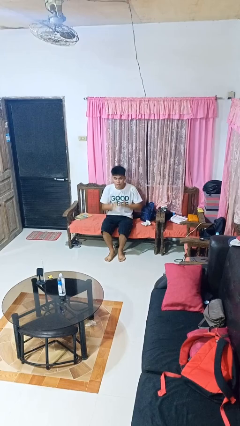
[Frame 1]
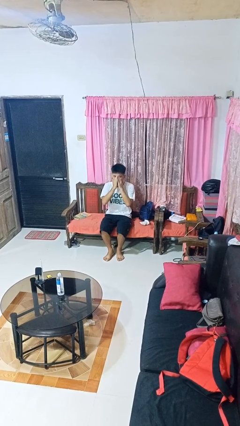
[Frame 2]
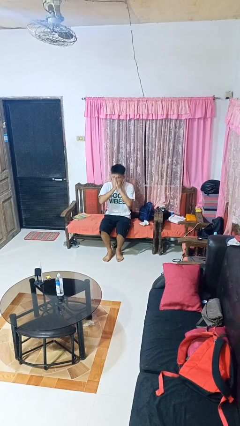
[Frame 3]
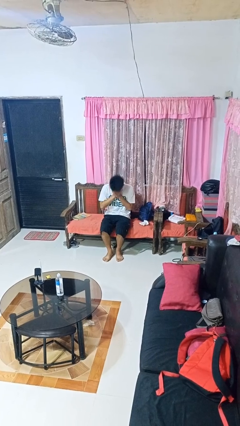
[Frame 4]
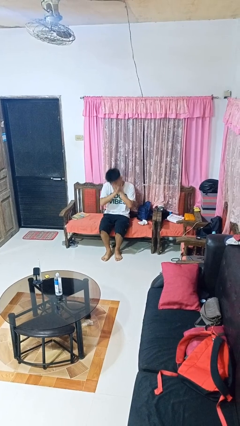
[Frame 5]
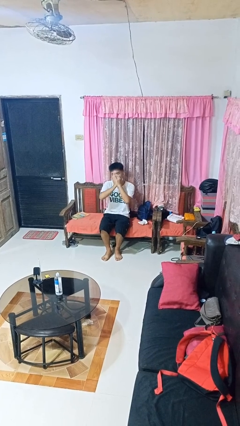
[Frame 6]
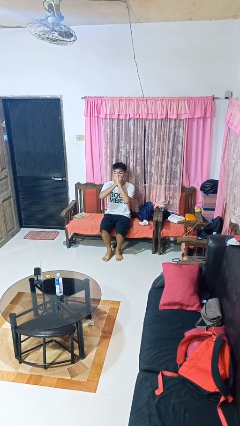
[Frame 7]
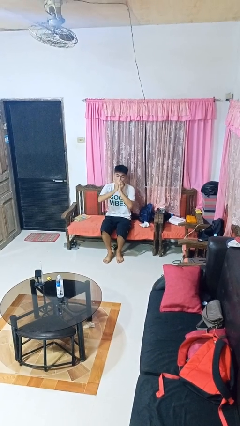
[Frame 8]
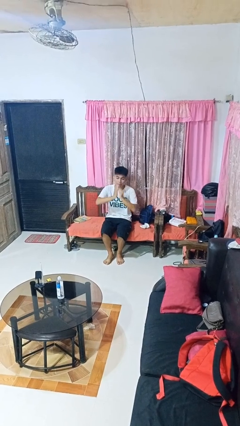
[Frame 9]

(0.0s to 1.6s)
person sneezes into hand

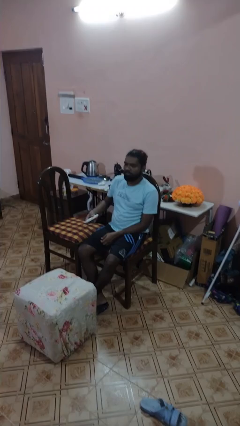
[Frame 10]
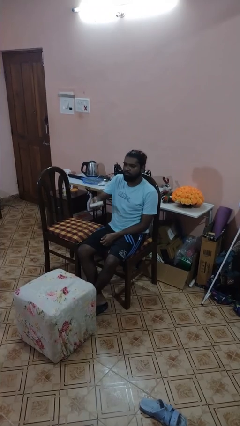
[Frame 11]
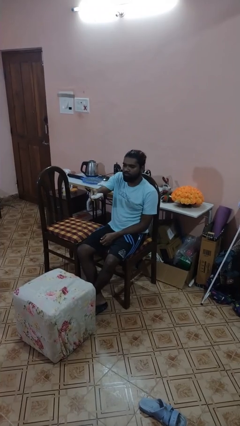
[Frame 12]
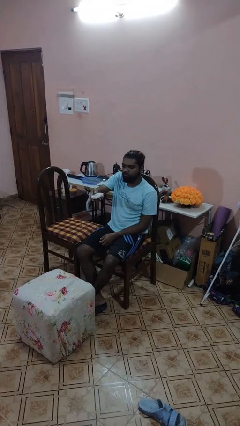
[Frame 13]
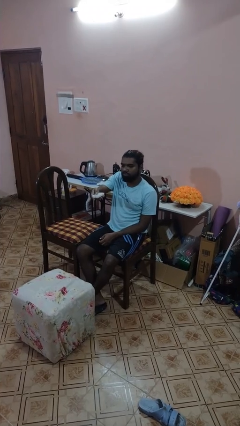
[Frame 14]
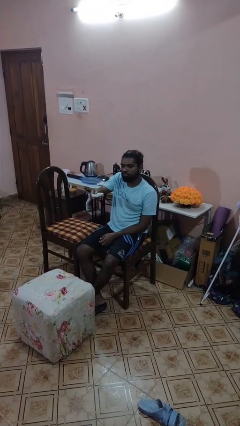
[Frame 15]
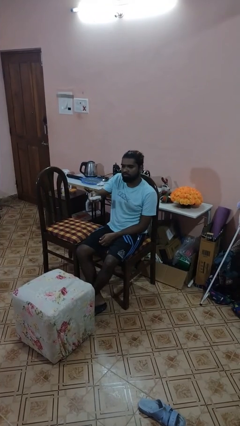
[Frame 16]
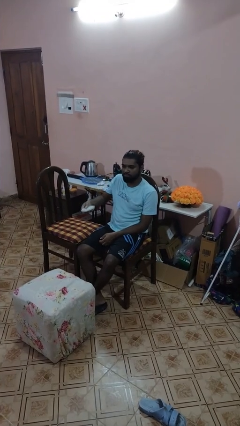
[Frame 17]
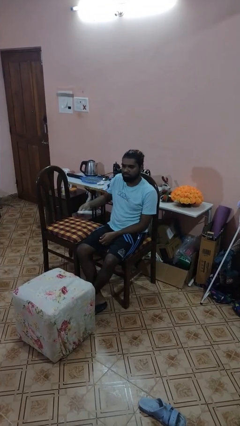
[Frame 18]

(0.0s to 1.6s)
person uses television remote

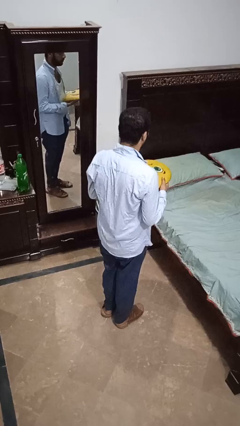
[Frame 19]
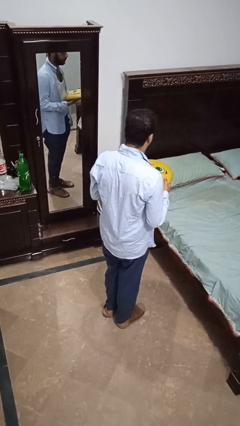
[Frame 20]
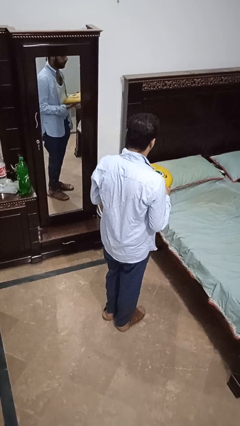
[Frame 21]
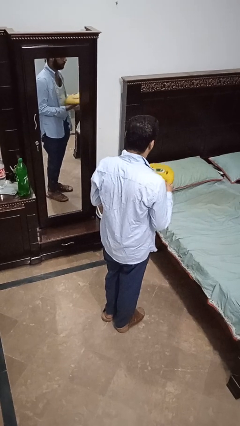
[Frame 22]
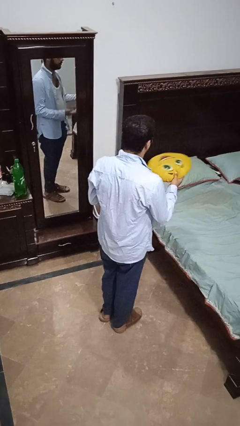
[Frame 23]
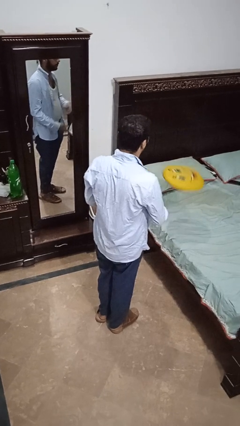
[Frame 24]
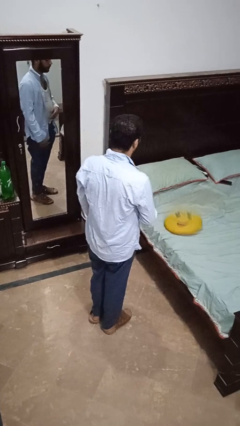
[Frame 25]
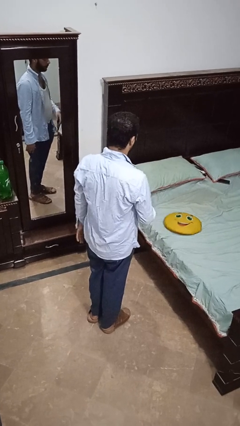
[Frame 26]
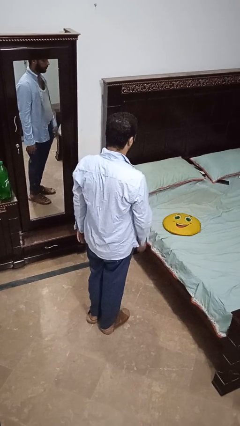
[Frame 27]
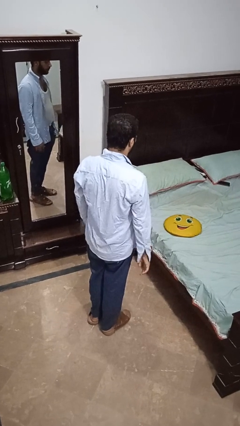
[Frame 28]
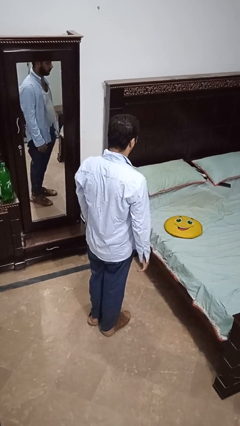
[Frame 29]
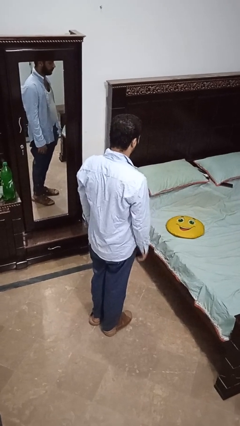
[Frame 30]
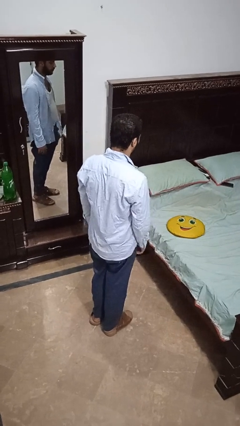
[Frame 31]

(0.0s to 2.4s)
person throws object on bed

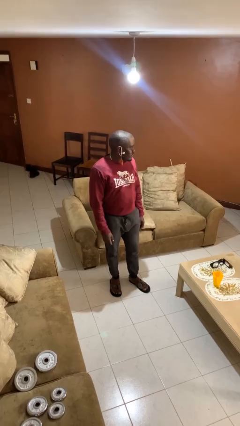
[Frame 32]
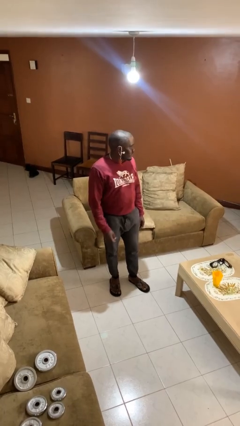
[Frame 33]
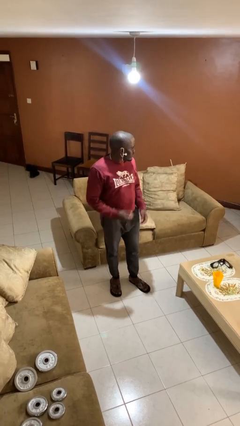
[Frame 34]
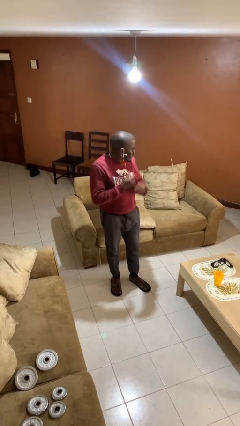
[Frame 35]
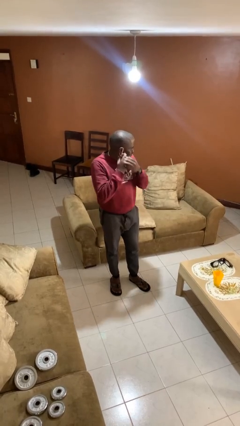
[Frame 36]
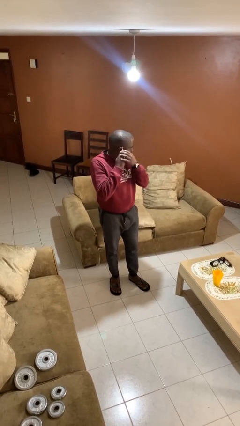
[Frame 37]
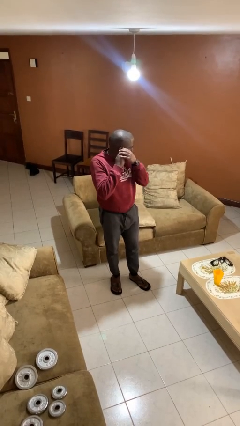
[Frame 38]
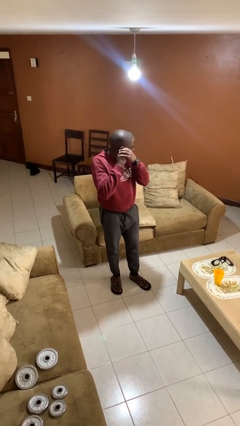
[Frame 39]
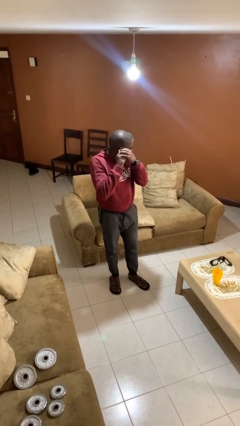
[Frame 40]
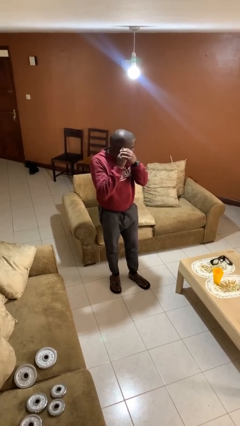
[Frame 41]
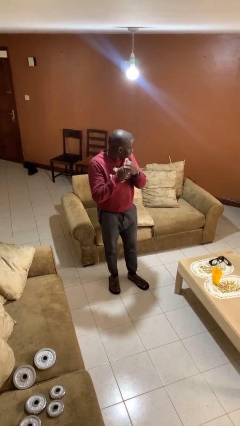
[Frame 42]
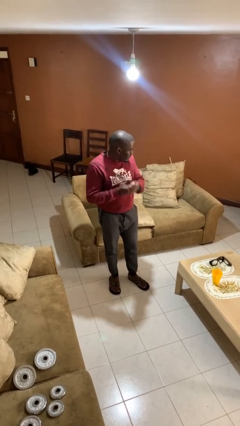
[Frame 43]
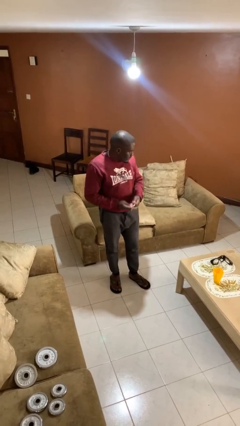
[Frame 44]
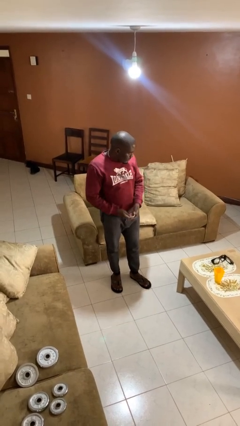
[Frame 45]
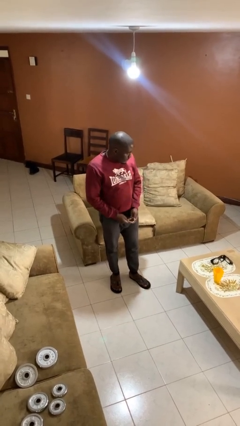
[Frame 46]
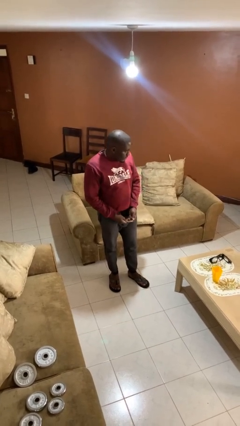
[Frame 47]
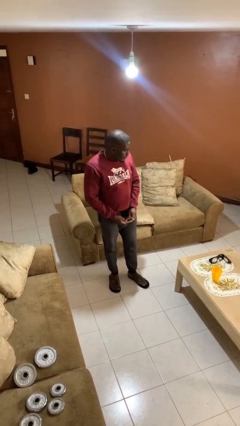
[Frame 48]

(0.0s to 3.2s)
person takes off earrings

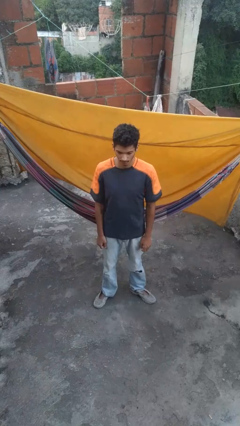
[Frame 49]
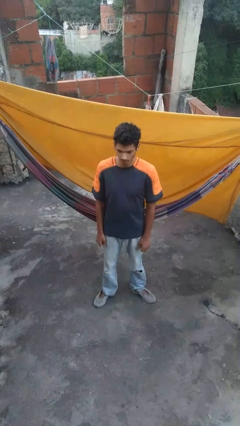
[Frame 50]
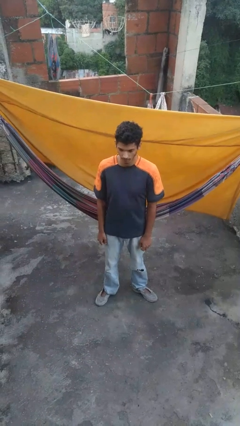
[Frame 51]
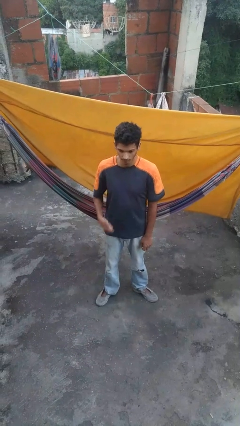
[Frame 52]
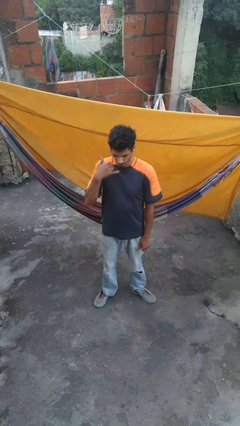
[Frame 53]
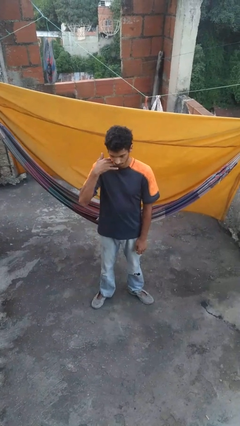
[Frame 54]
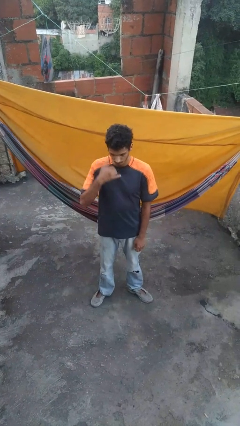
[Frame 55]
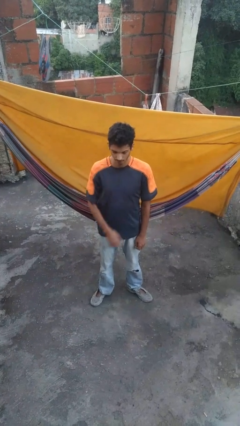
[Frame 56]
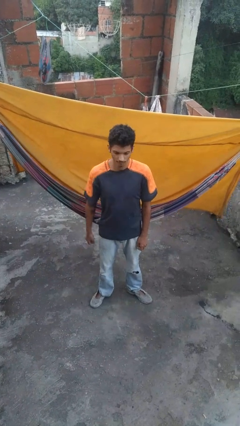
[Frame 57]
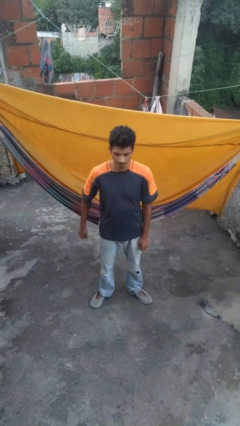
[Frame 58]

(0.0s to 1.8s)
person gestures call me

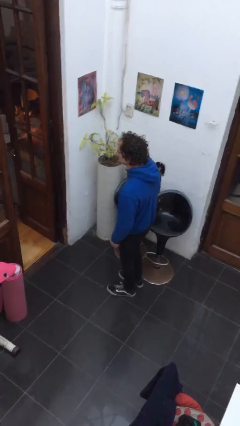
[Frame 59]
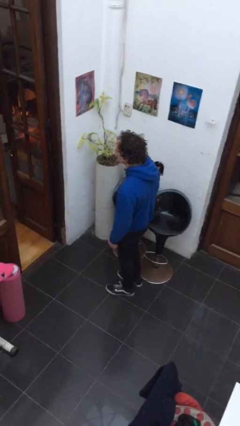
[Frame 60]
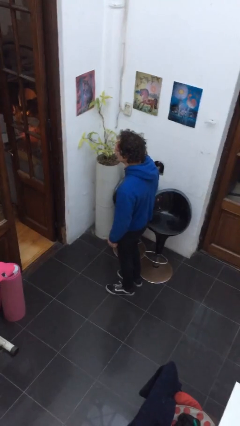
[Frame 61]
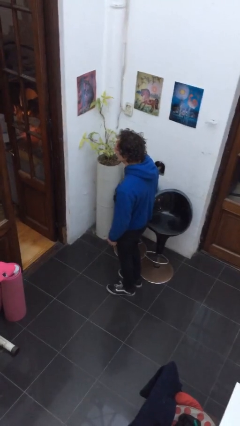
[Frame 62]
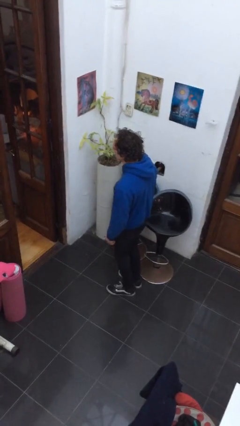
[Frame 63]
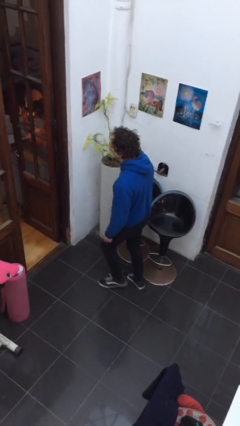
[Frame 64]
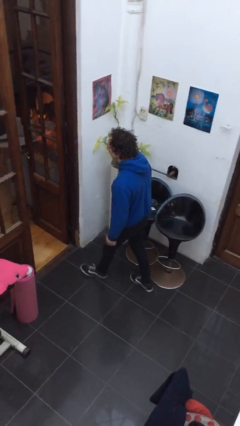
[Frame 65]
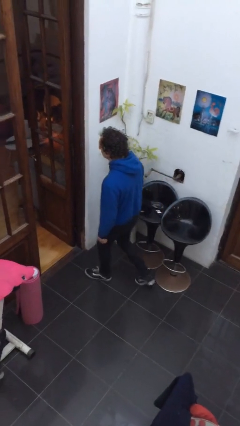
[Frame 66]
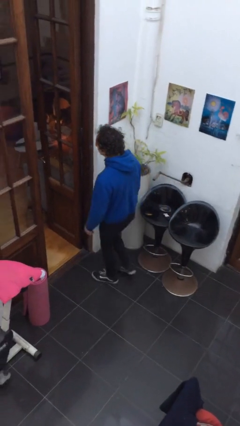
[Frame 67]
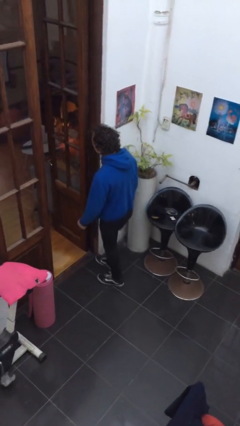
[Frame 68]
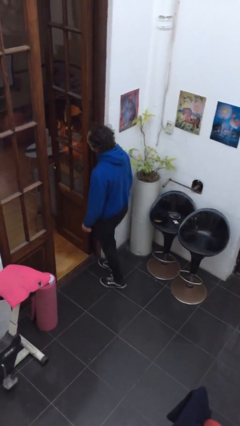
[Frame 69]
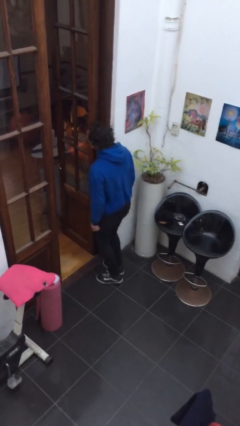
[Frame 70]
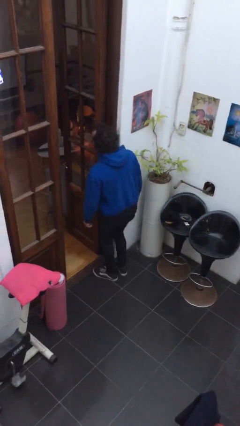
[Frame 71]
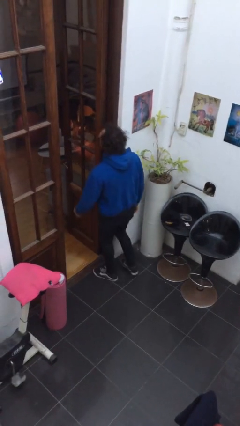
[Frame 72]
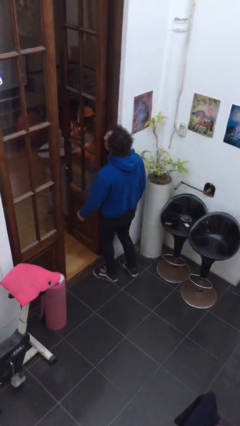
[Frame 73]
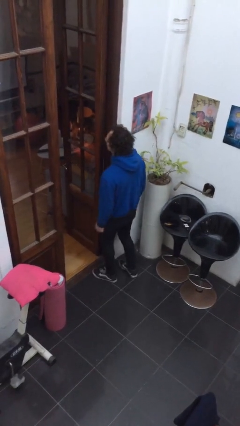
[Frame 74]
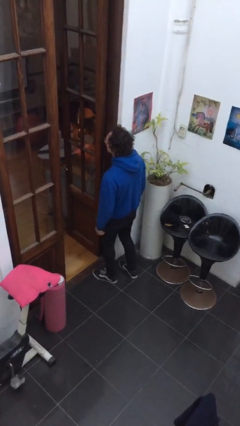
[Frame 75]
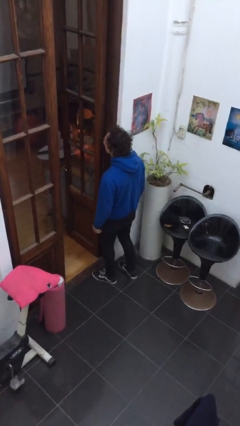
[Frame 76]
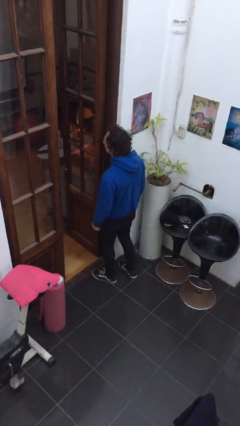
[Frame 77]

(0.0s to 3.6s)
person bumps into wall

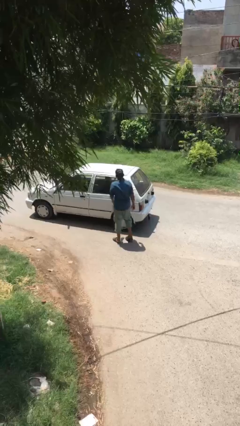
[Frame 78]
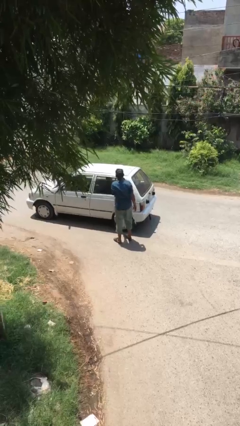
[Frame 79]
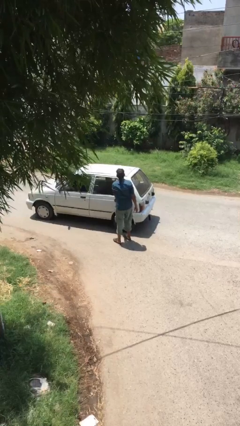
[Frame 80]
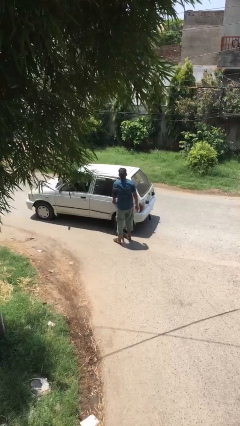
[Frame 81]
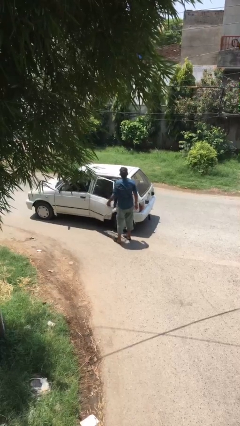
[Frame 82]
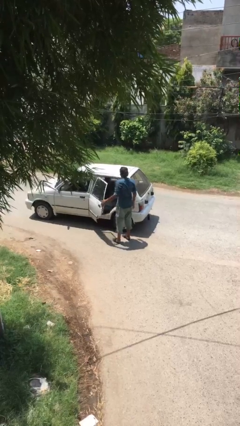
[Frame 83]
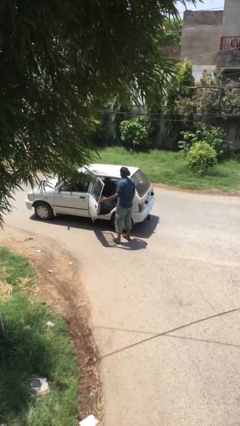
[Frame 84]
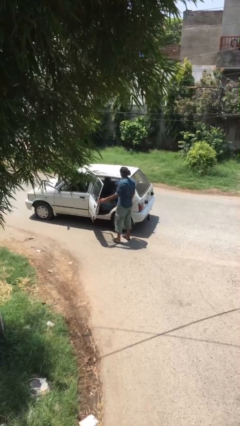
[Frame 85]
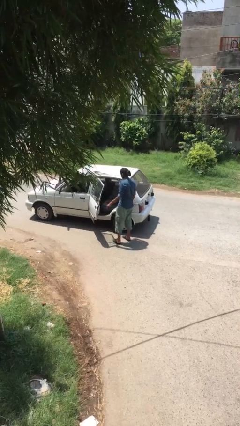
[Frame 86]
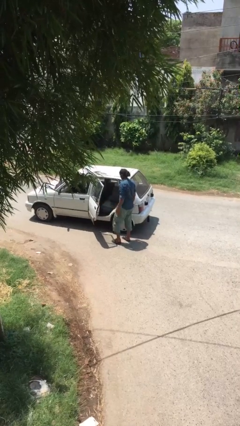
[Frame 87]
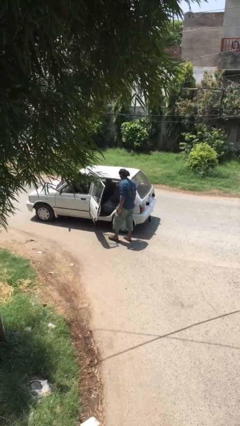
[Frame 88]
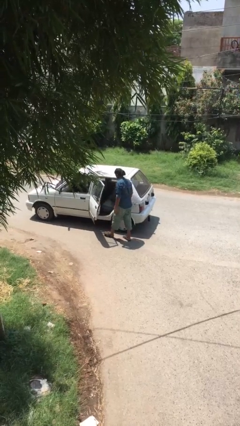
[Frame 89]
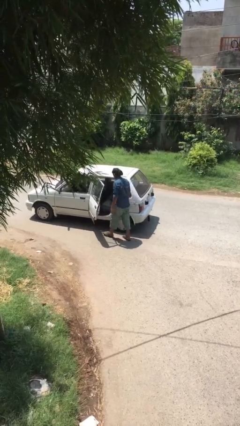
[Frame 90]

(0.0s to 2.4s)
person opens car door

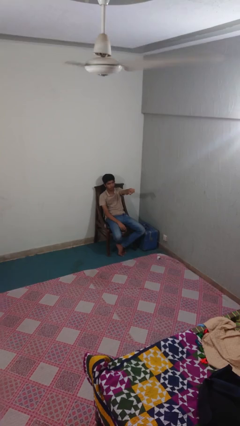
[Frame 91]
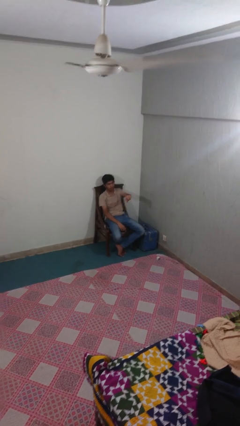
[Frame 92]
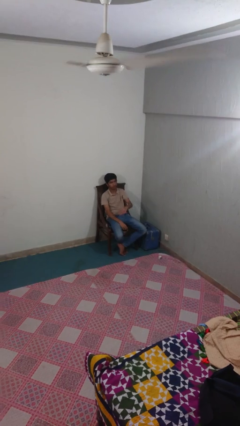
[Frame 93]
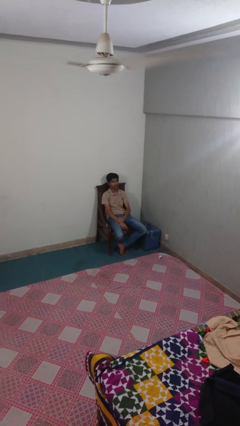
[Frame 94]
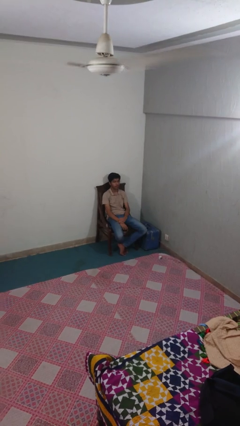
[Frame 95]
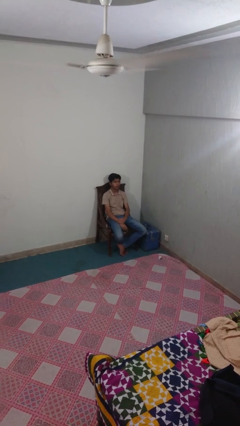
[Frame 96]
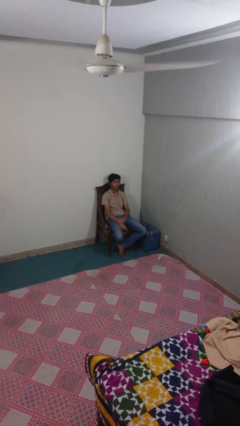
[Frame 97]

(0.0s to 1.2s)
person points at person
